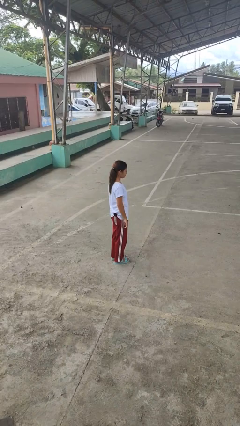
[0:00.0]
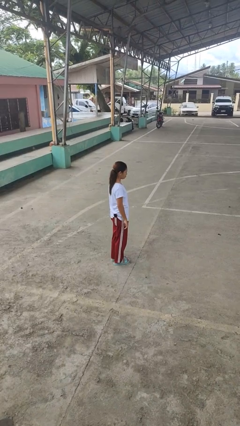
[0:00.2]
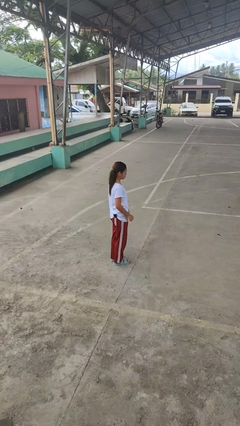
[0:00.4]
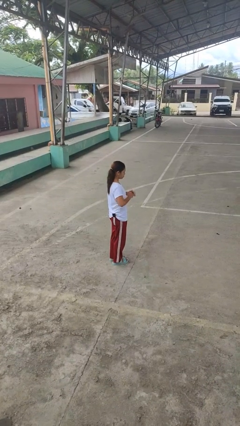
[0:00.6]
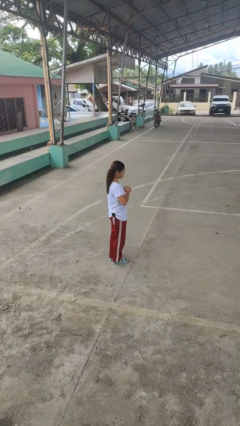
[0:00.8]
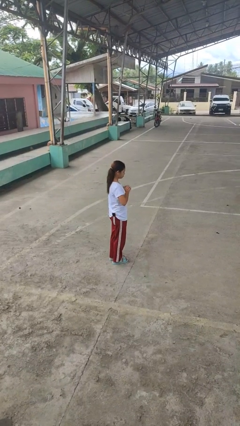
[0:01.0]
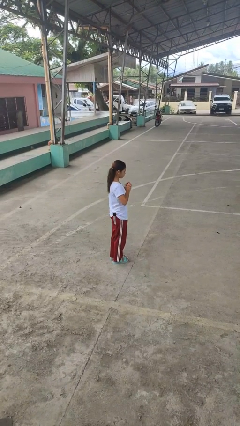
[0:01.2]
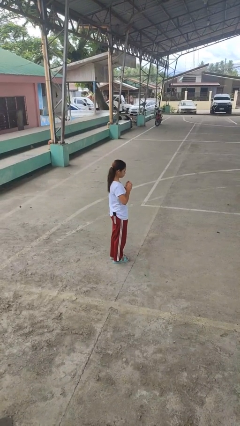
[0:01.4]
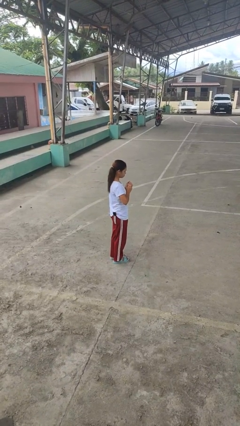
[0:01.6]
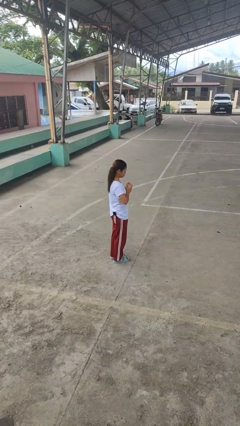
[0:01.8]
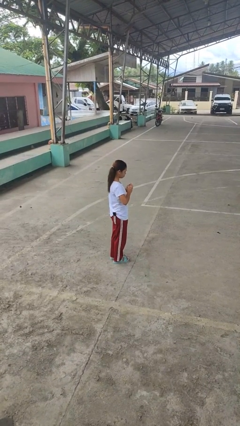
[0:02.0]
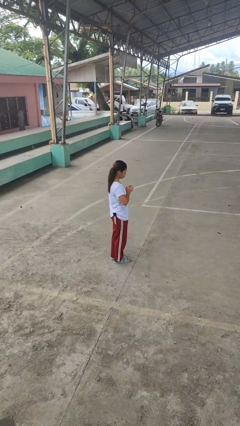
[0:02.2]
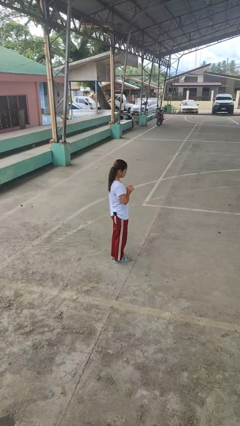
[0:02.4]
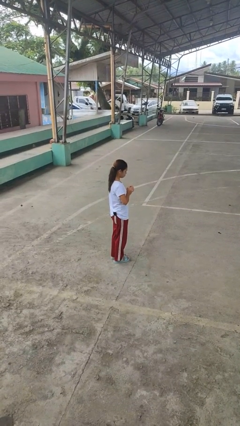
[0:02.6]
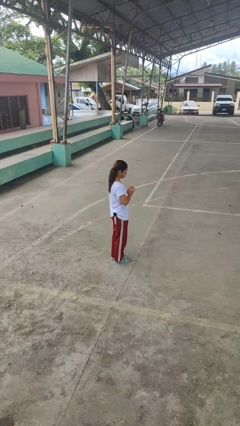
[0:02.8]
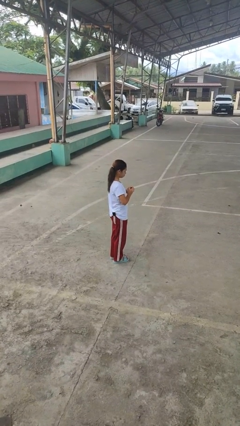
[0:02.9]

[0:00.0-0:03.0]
person cracks knuckles

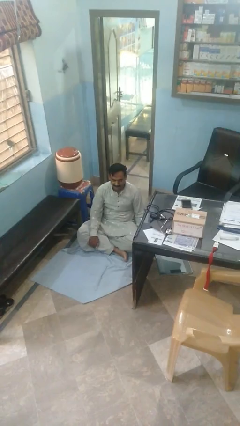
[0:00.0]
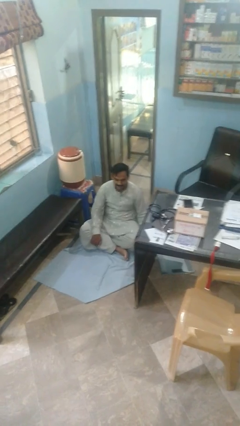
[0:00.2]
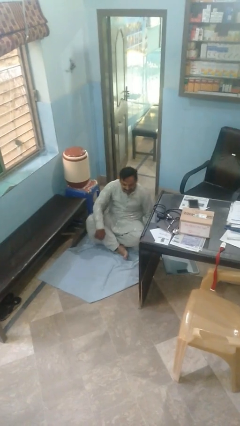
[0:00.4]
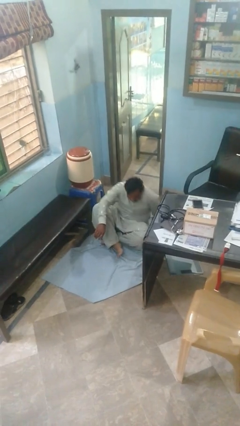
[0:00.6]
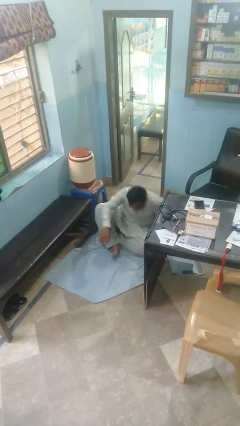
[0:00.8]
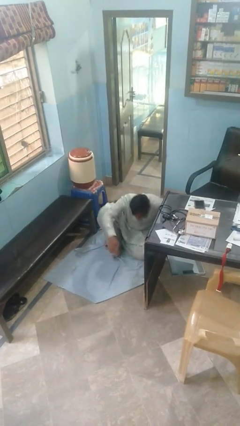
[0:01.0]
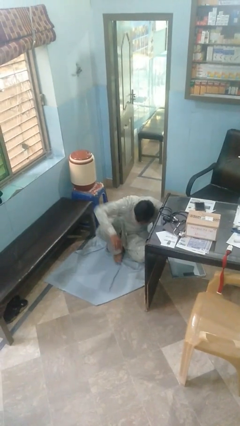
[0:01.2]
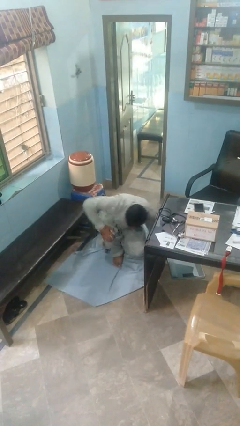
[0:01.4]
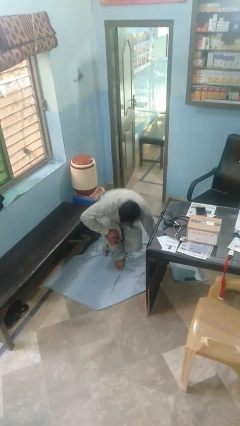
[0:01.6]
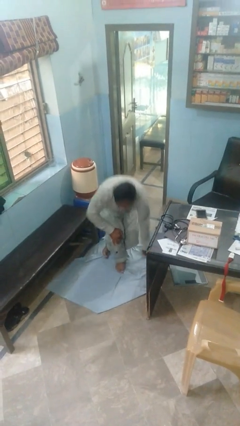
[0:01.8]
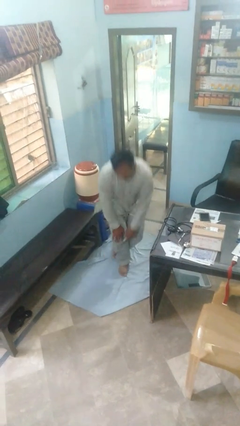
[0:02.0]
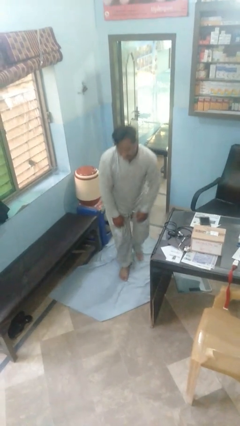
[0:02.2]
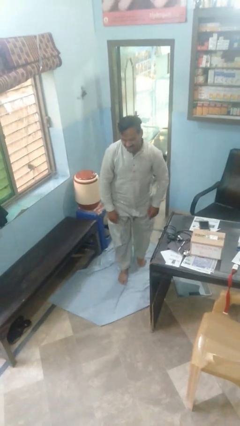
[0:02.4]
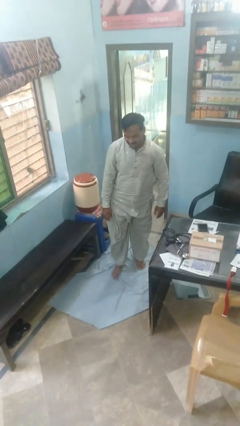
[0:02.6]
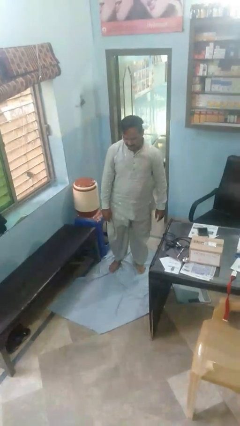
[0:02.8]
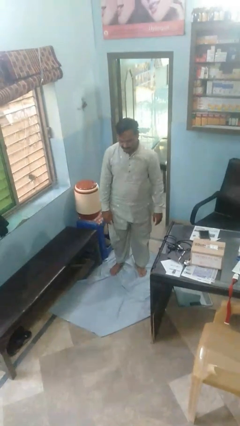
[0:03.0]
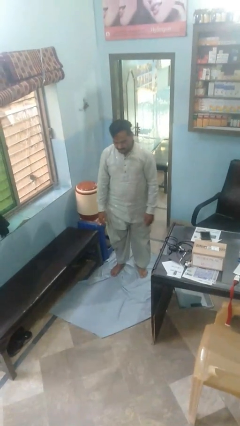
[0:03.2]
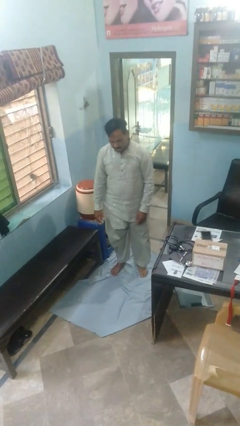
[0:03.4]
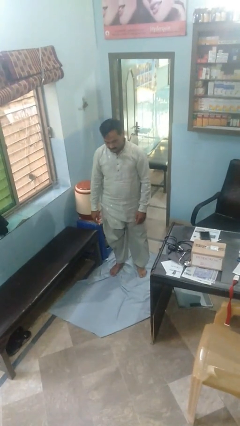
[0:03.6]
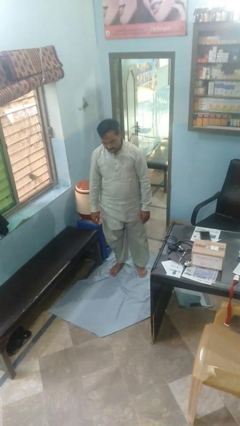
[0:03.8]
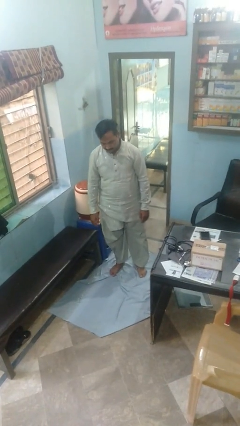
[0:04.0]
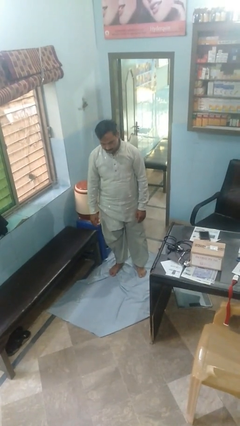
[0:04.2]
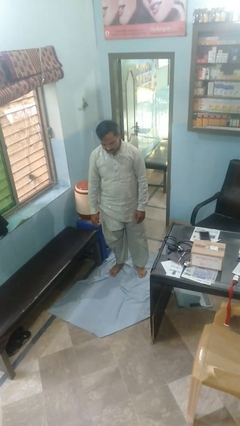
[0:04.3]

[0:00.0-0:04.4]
person stands up from floor

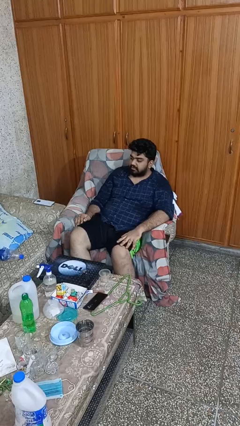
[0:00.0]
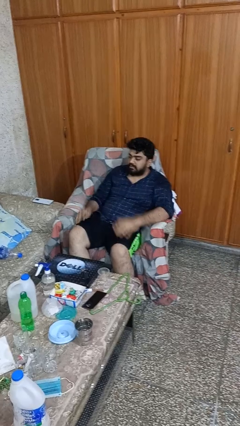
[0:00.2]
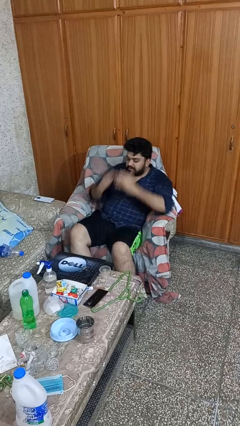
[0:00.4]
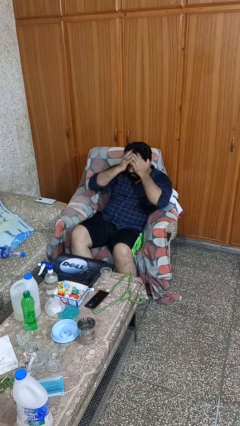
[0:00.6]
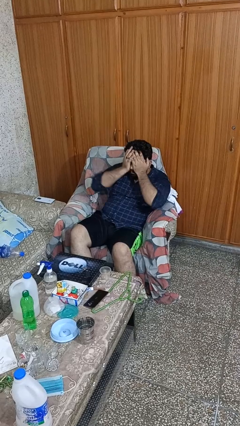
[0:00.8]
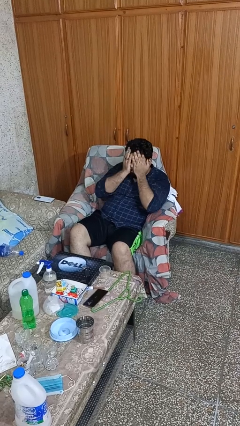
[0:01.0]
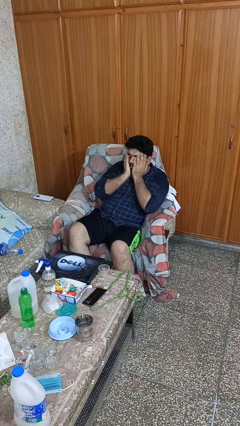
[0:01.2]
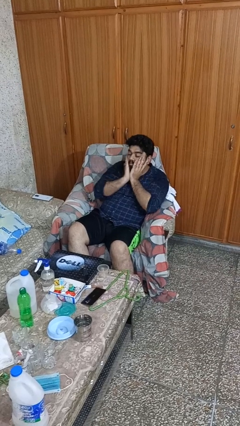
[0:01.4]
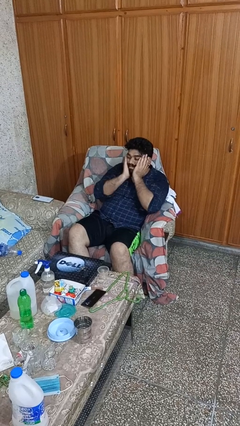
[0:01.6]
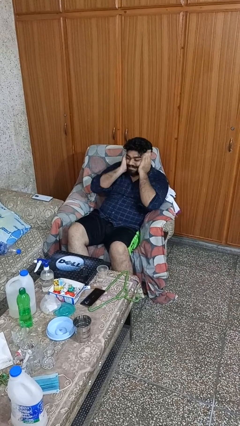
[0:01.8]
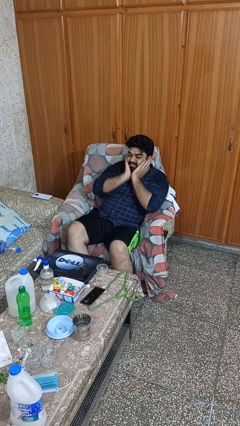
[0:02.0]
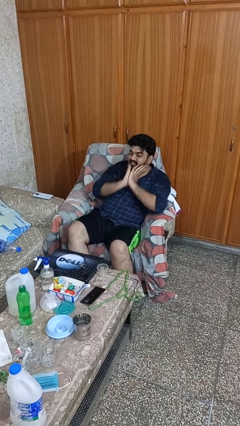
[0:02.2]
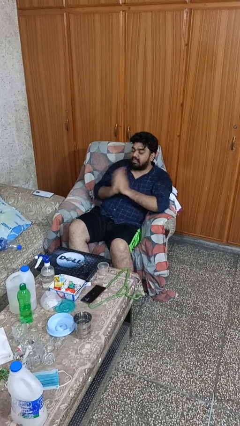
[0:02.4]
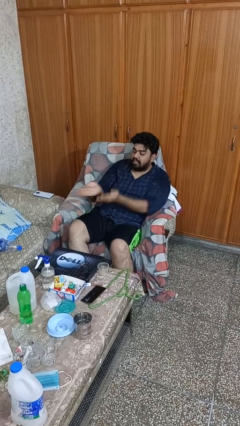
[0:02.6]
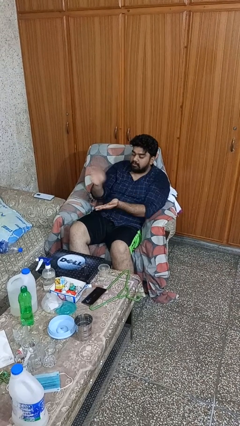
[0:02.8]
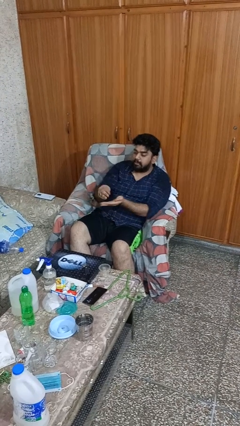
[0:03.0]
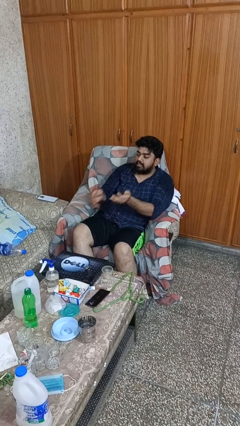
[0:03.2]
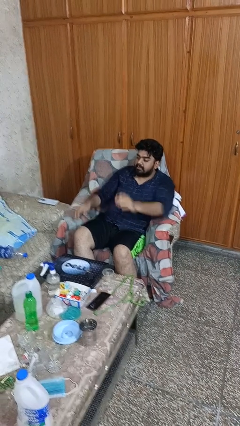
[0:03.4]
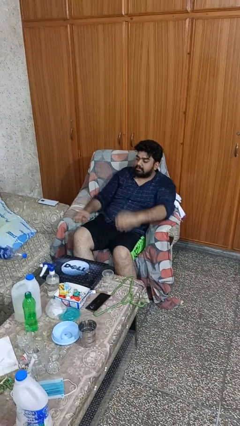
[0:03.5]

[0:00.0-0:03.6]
person scratches face

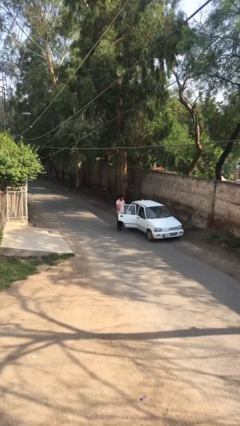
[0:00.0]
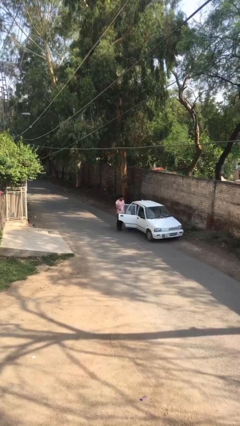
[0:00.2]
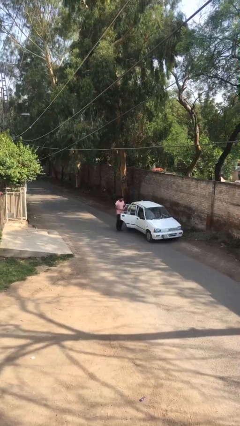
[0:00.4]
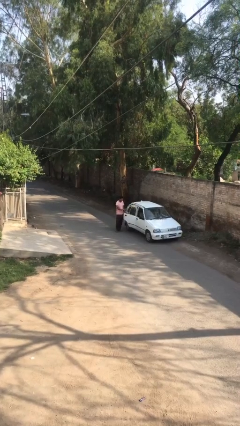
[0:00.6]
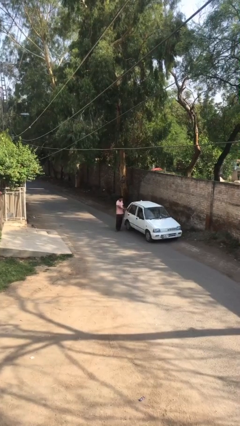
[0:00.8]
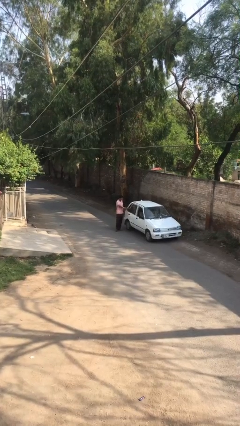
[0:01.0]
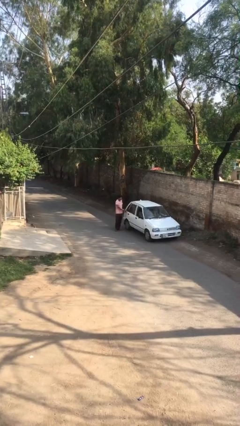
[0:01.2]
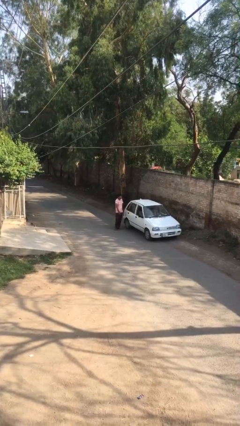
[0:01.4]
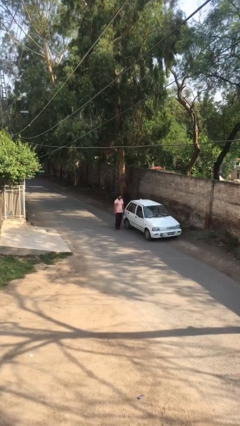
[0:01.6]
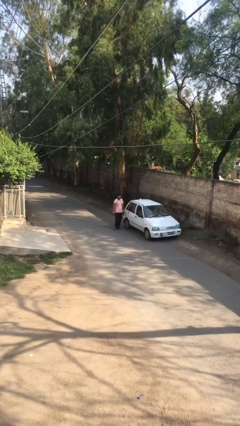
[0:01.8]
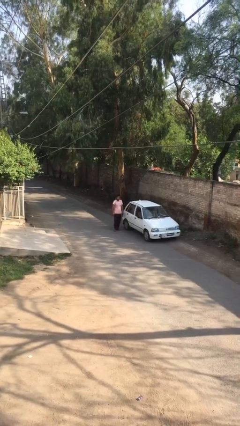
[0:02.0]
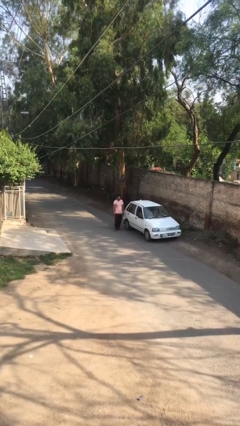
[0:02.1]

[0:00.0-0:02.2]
person closes car door

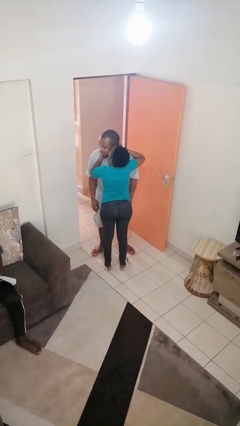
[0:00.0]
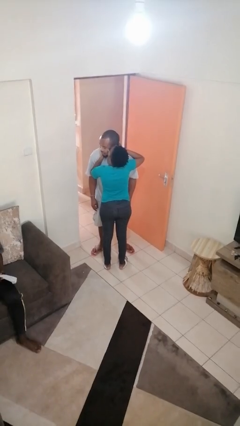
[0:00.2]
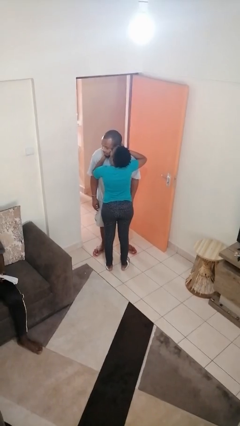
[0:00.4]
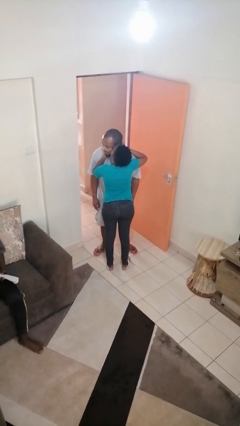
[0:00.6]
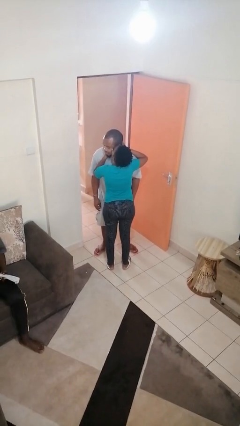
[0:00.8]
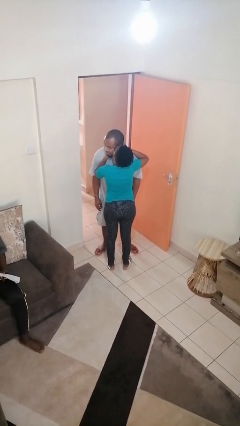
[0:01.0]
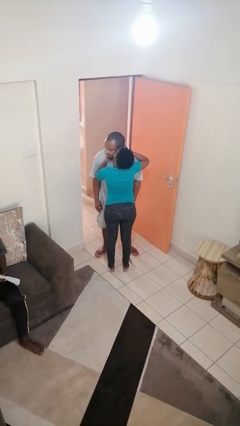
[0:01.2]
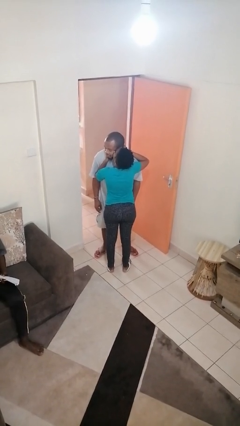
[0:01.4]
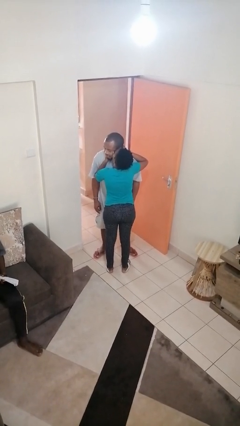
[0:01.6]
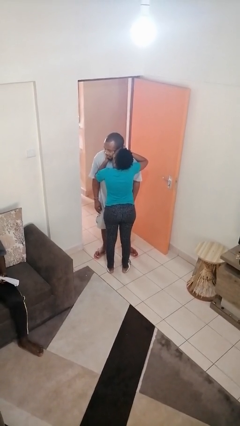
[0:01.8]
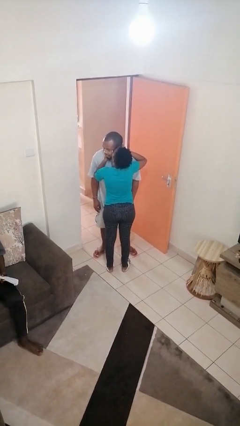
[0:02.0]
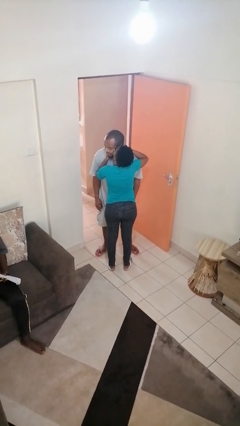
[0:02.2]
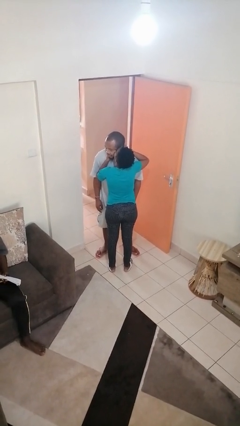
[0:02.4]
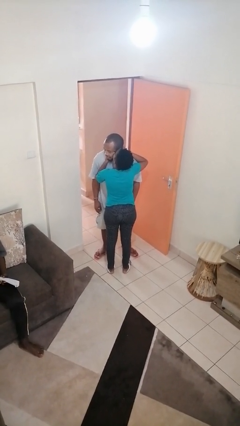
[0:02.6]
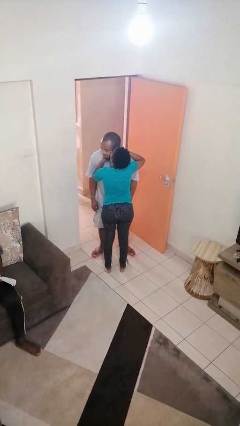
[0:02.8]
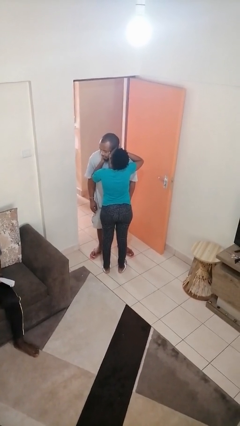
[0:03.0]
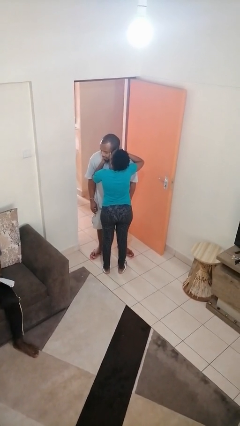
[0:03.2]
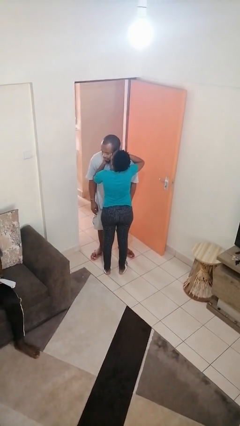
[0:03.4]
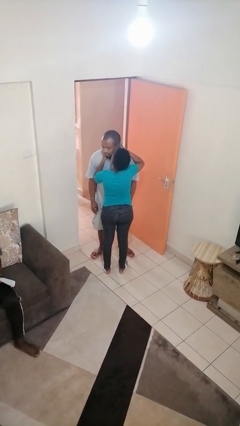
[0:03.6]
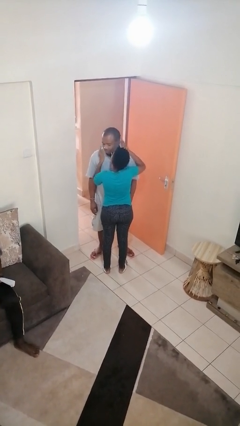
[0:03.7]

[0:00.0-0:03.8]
person kisses cheek of person
